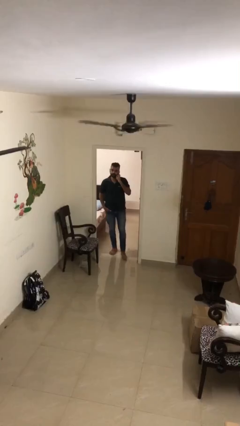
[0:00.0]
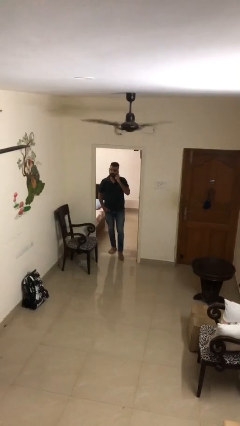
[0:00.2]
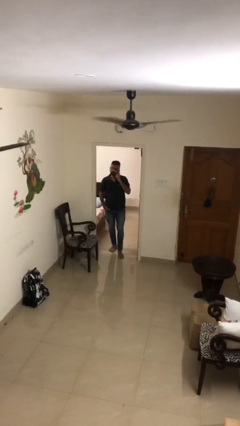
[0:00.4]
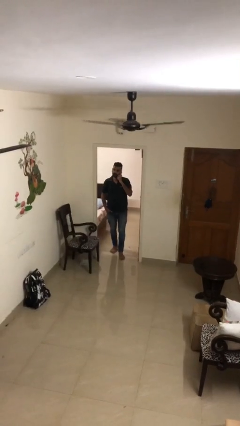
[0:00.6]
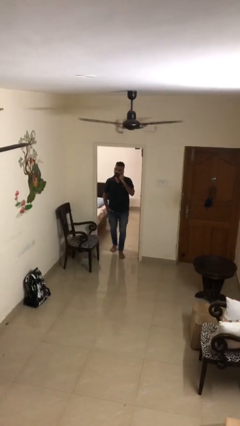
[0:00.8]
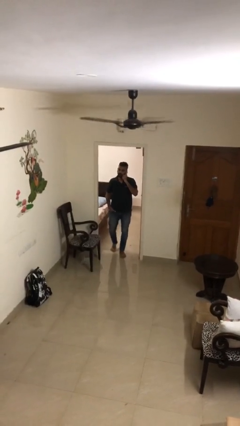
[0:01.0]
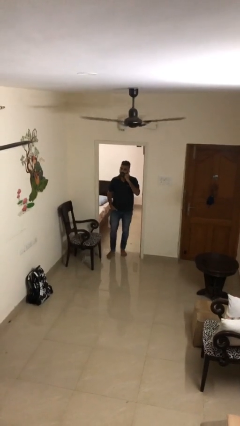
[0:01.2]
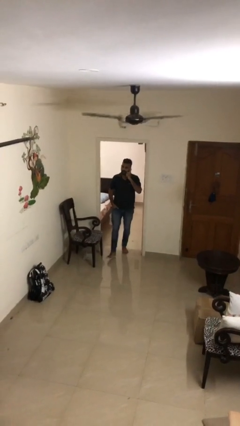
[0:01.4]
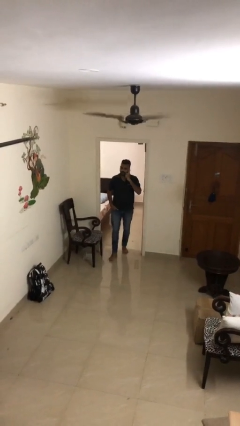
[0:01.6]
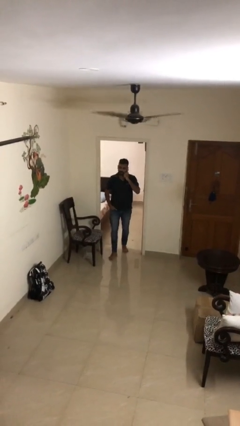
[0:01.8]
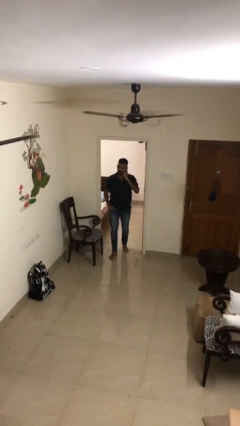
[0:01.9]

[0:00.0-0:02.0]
person enters scene through structure

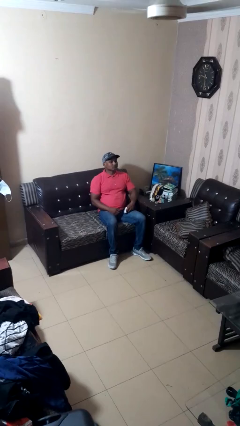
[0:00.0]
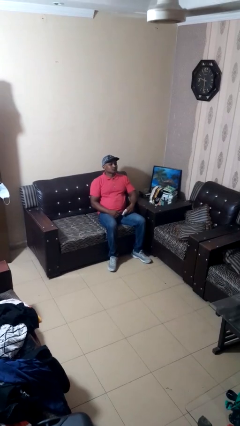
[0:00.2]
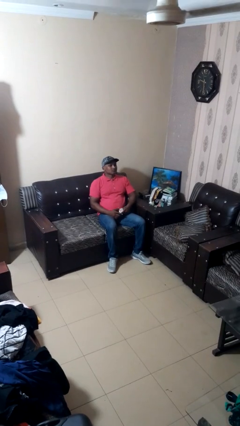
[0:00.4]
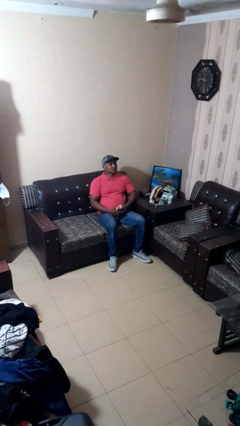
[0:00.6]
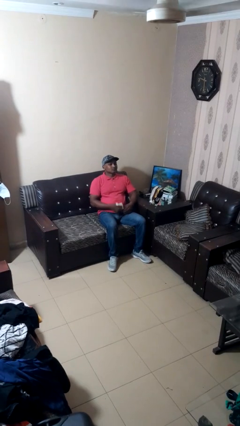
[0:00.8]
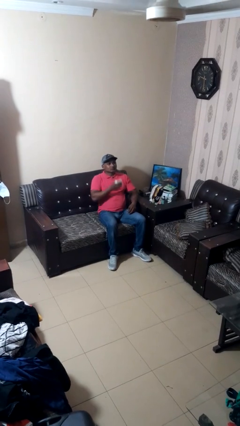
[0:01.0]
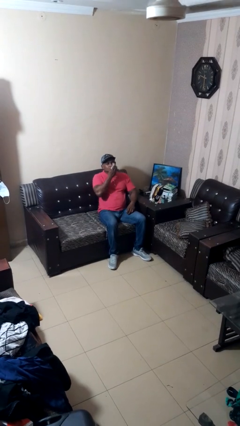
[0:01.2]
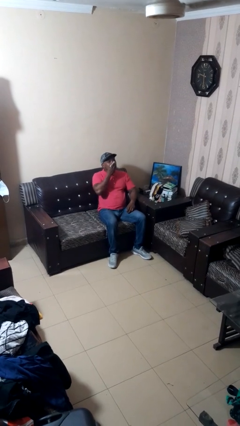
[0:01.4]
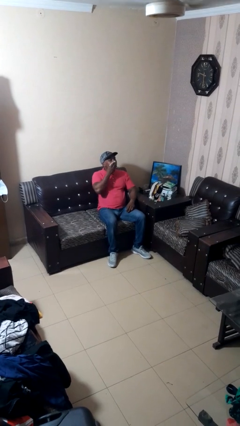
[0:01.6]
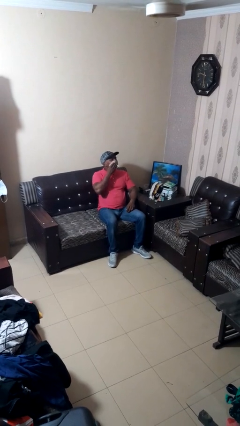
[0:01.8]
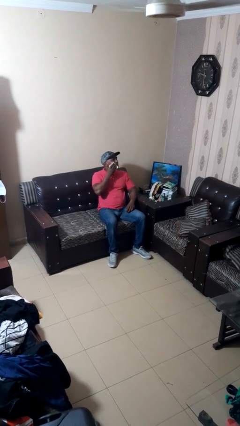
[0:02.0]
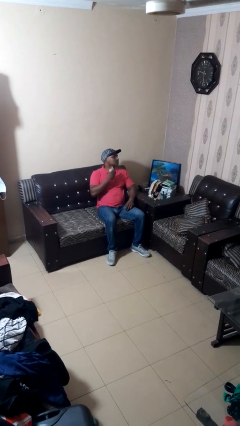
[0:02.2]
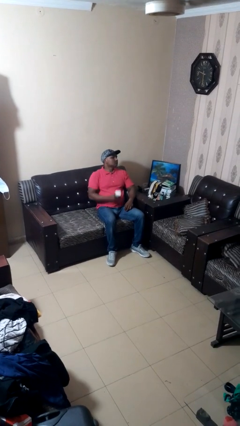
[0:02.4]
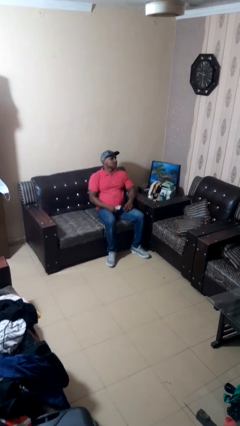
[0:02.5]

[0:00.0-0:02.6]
person wipes mouth with napkin

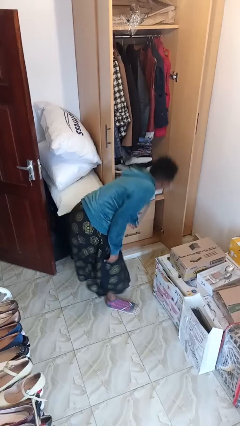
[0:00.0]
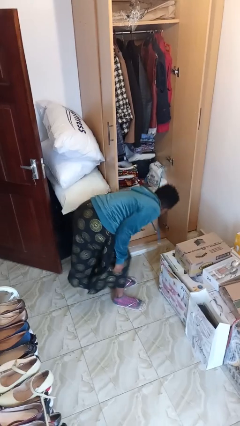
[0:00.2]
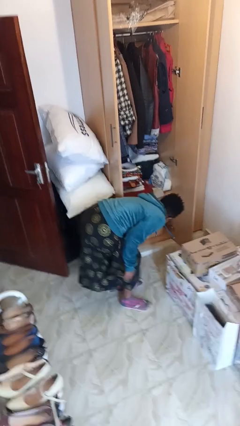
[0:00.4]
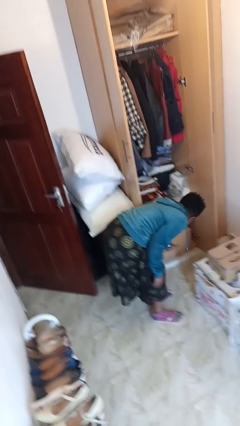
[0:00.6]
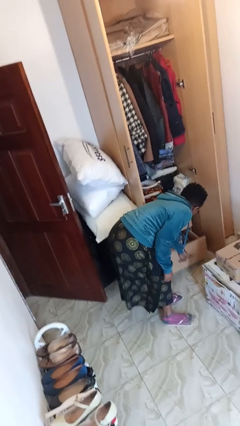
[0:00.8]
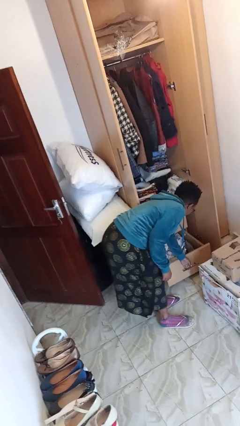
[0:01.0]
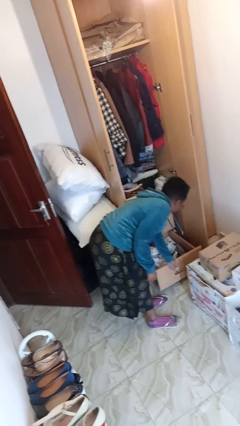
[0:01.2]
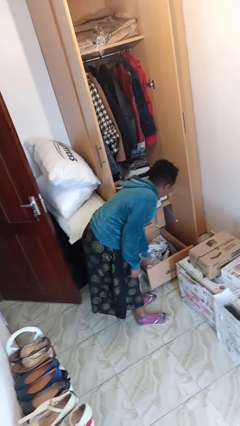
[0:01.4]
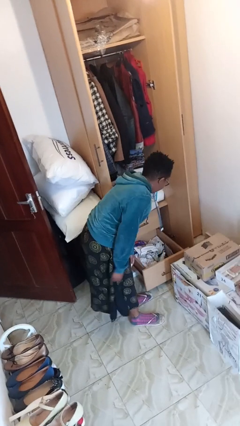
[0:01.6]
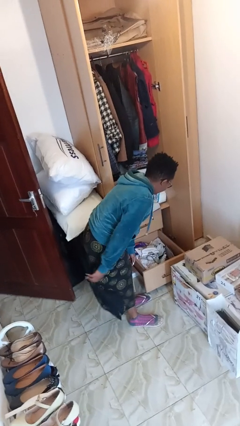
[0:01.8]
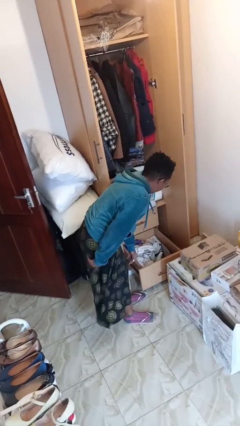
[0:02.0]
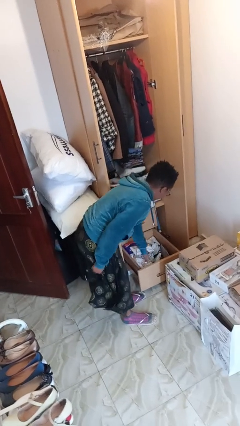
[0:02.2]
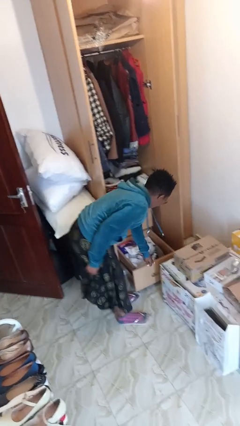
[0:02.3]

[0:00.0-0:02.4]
person opens dresser drawer

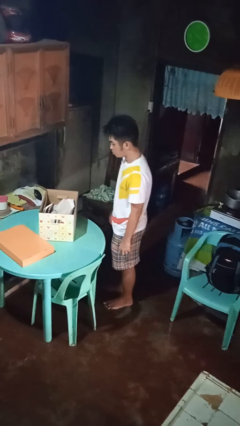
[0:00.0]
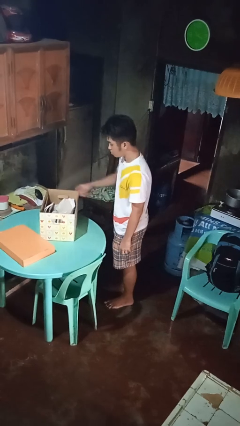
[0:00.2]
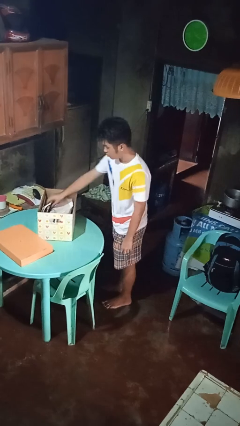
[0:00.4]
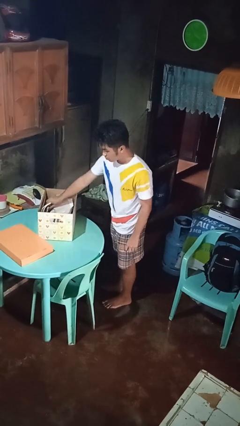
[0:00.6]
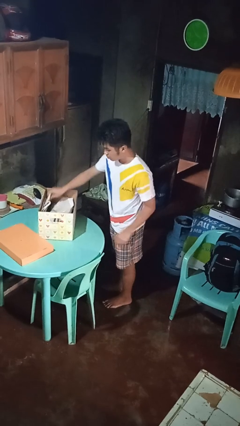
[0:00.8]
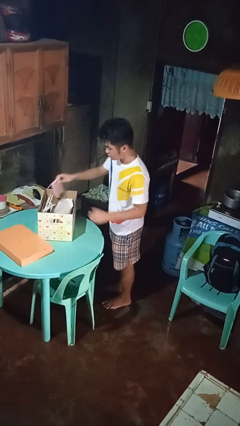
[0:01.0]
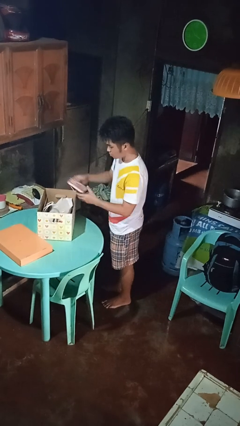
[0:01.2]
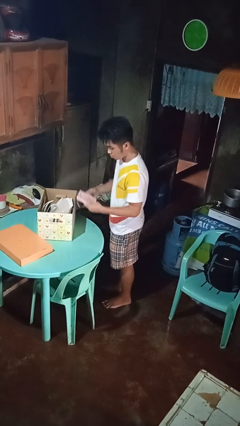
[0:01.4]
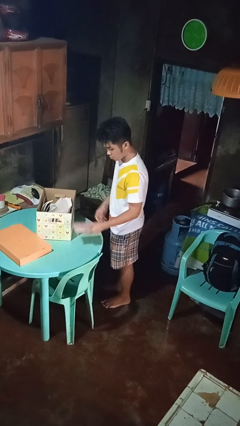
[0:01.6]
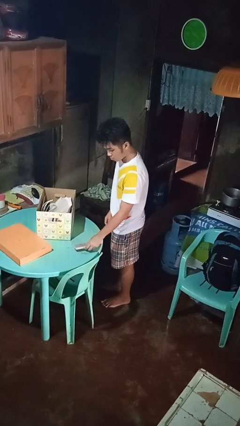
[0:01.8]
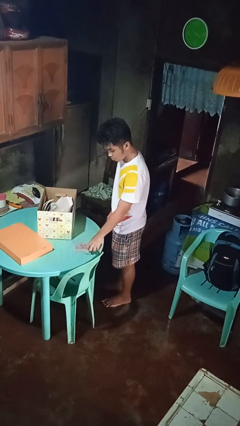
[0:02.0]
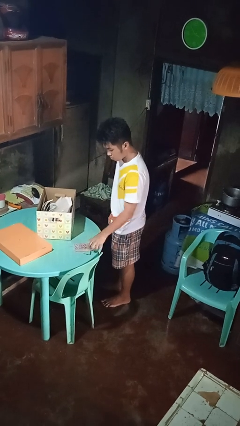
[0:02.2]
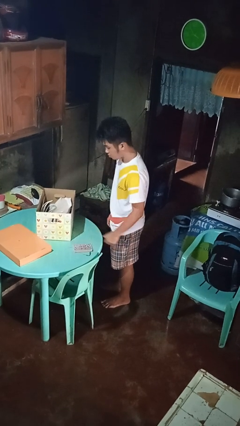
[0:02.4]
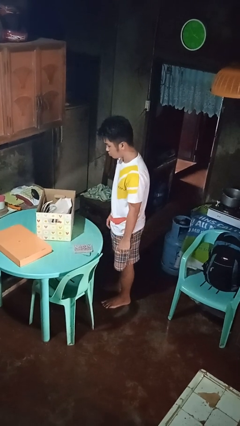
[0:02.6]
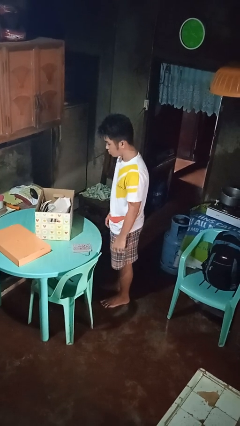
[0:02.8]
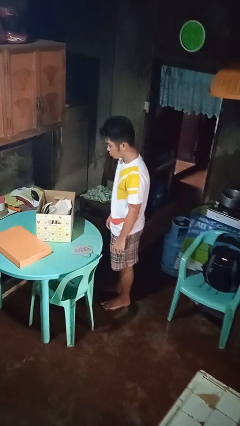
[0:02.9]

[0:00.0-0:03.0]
person takes object from box

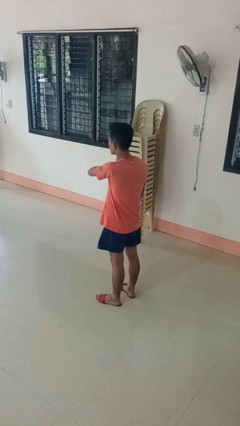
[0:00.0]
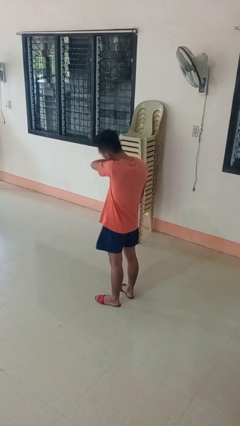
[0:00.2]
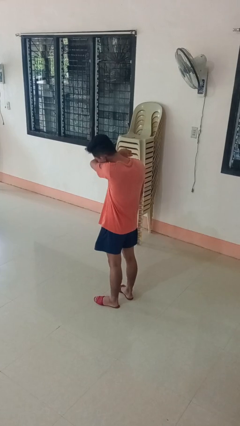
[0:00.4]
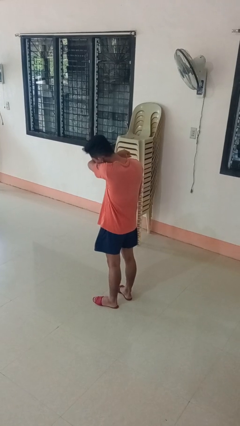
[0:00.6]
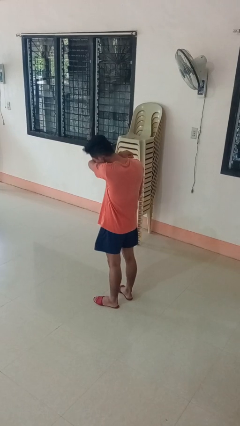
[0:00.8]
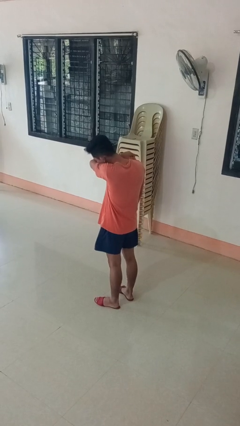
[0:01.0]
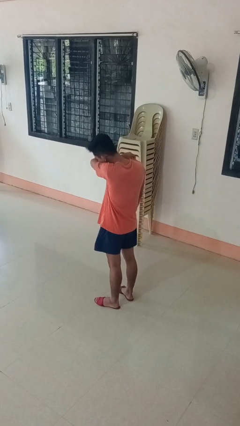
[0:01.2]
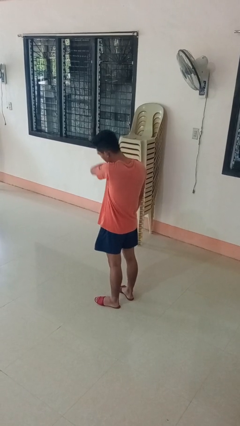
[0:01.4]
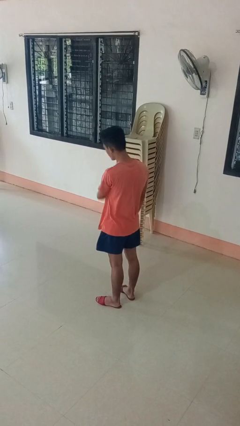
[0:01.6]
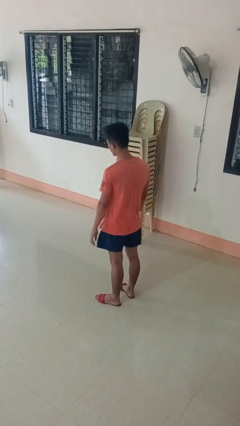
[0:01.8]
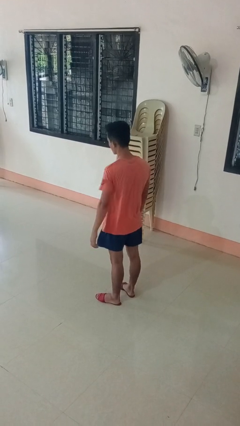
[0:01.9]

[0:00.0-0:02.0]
person sneezes into arm

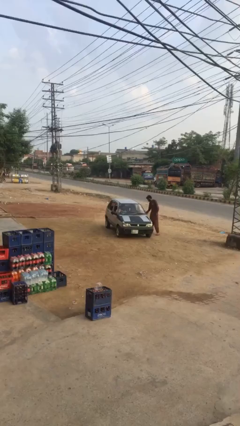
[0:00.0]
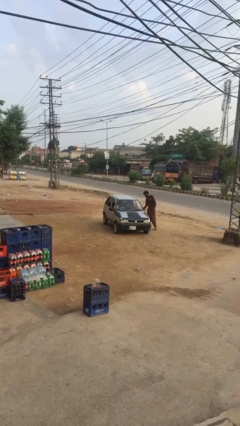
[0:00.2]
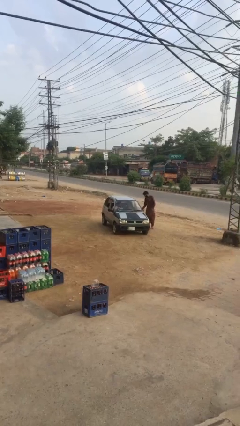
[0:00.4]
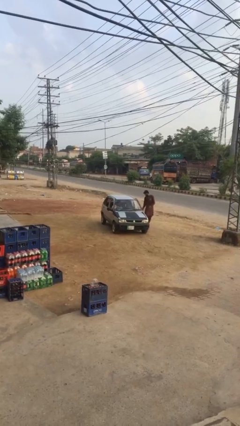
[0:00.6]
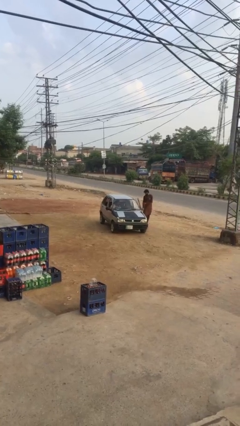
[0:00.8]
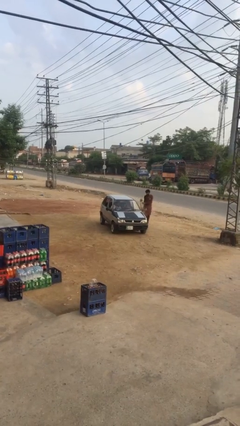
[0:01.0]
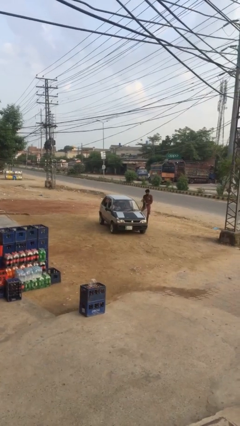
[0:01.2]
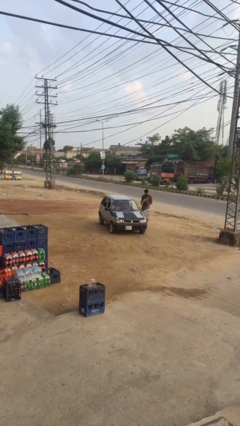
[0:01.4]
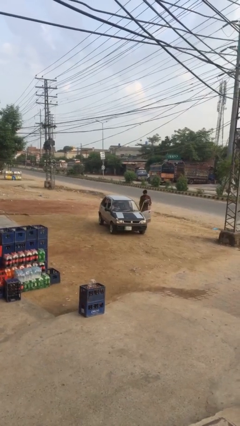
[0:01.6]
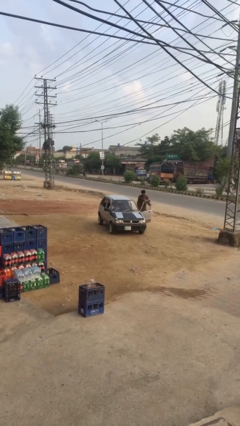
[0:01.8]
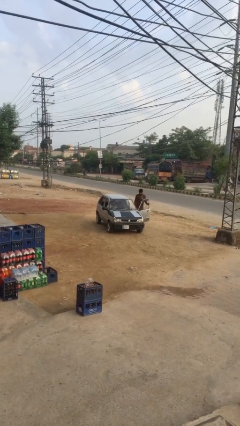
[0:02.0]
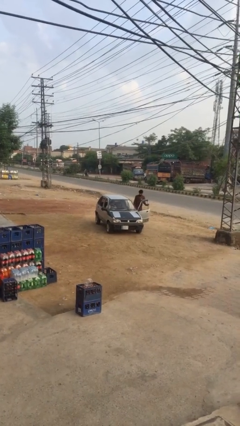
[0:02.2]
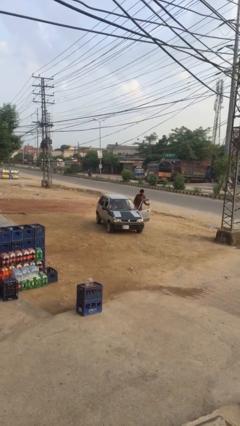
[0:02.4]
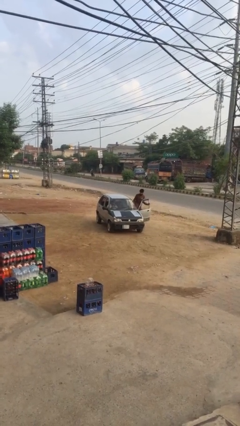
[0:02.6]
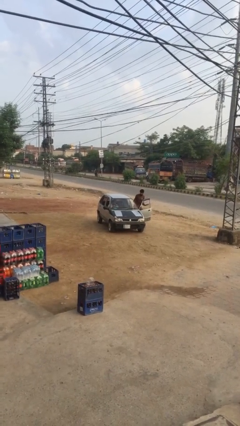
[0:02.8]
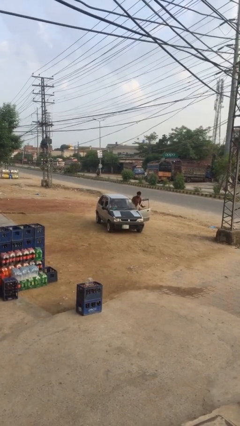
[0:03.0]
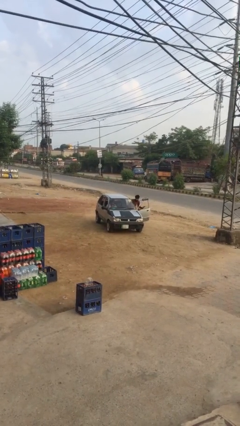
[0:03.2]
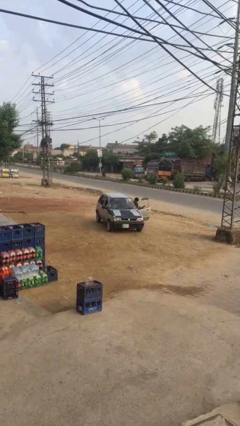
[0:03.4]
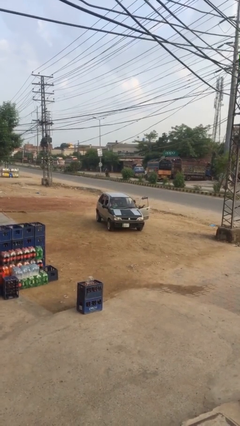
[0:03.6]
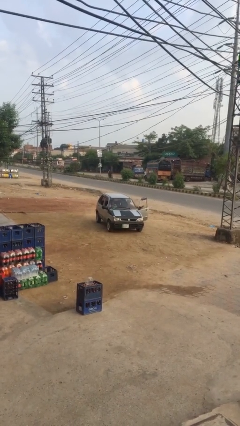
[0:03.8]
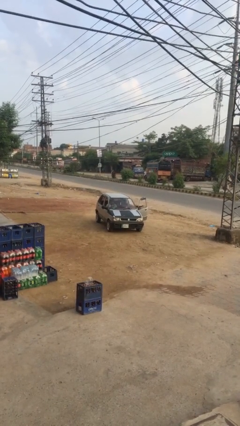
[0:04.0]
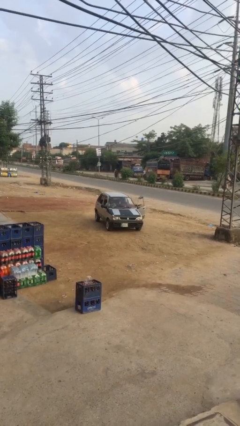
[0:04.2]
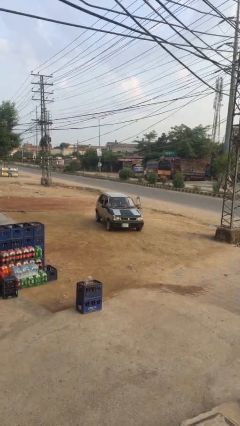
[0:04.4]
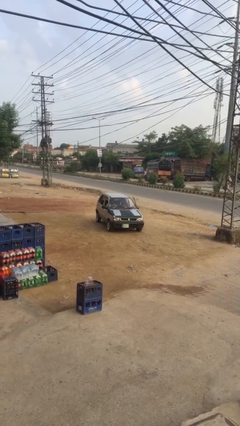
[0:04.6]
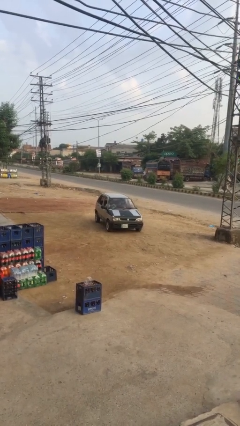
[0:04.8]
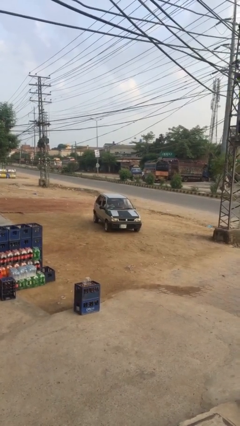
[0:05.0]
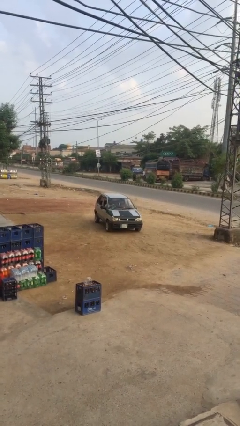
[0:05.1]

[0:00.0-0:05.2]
car picks up person
